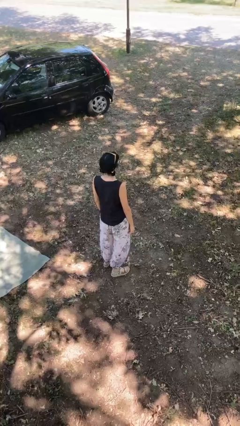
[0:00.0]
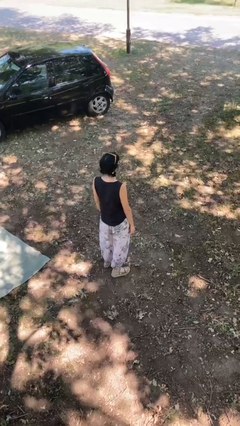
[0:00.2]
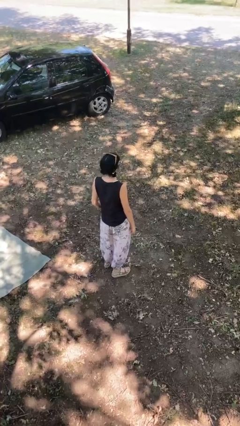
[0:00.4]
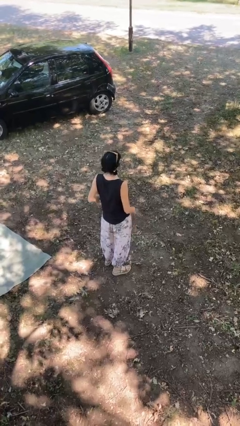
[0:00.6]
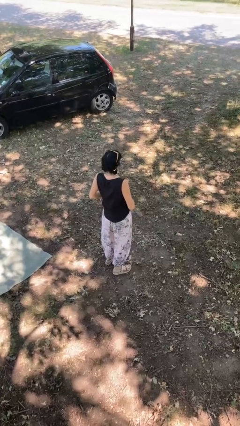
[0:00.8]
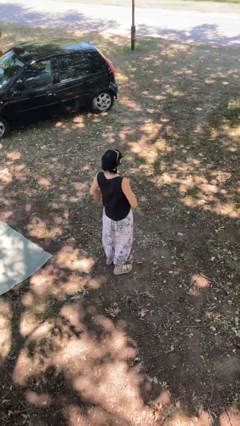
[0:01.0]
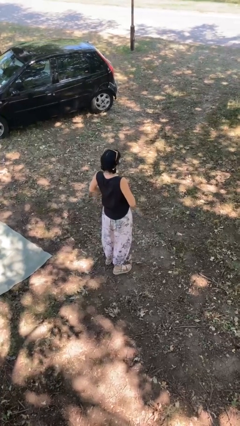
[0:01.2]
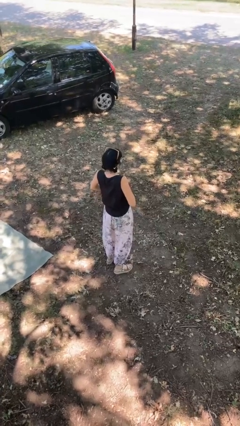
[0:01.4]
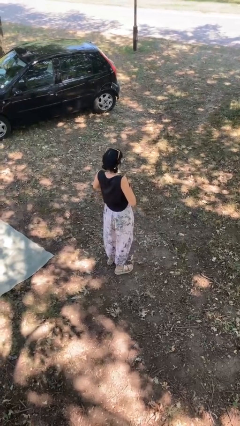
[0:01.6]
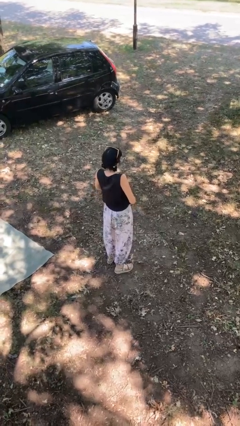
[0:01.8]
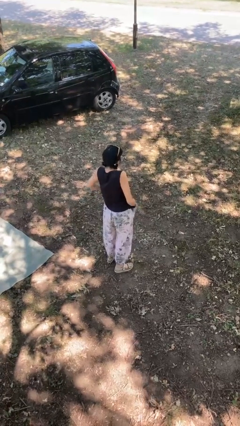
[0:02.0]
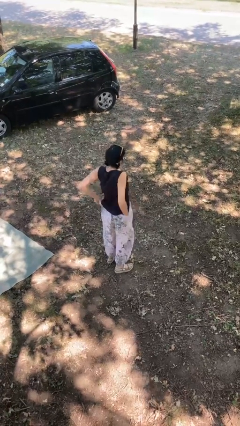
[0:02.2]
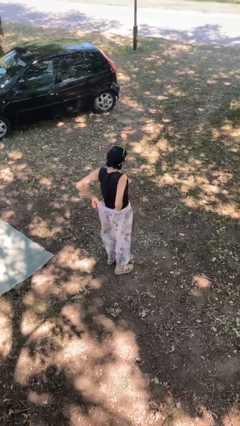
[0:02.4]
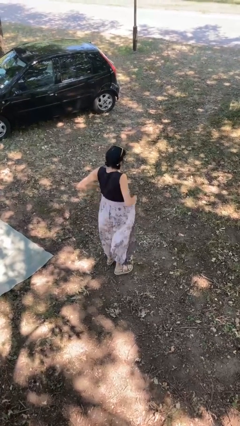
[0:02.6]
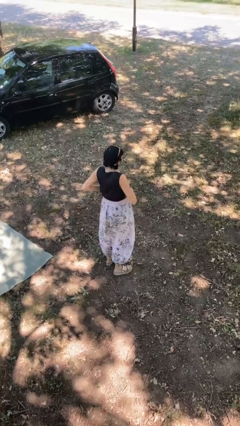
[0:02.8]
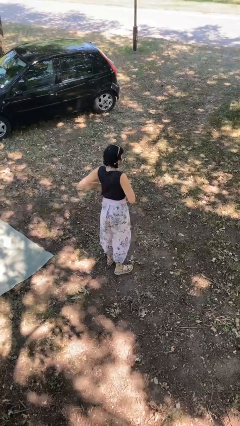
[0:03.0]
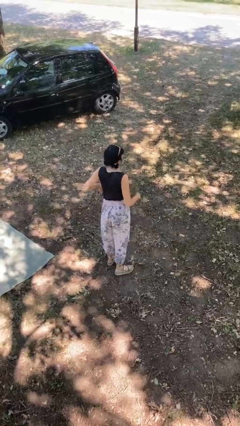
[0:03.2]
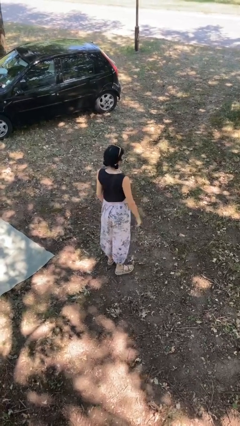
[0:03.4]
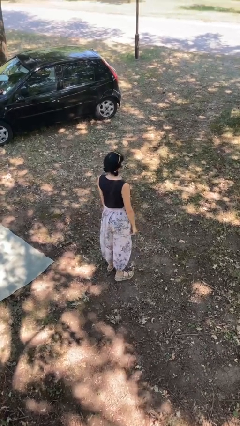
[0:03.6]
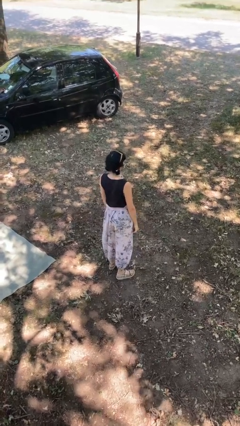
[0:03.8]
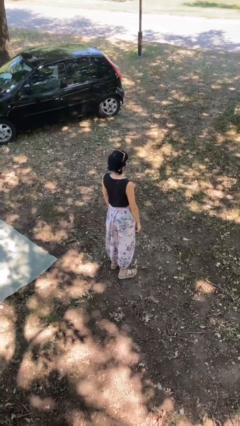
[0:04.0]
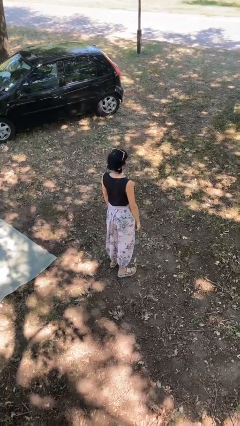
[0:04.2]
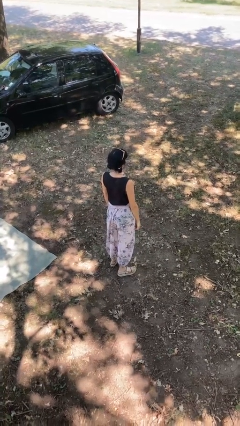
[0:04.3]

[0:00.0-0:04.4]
person tucks in shirt

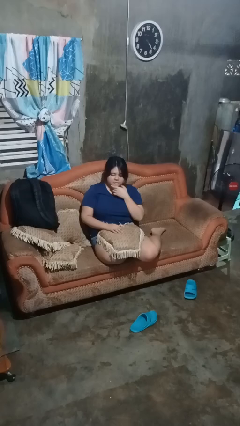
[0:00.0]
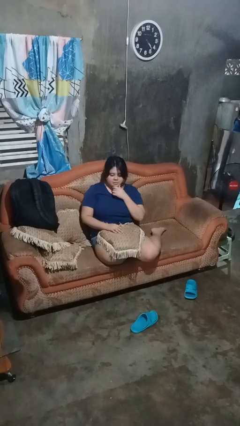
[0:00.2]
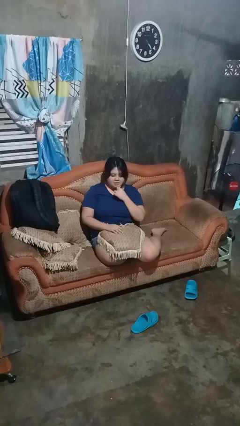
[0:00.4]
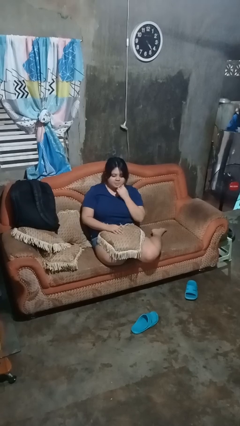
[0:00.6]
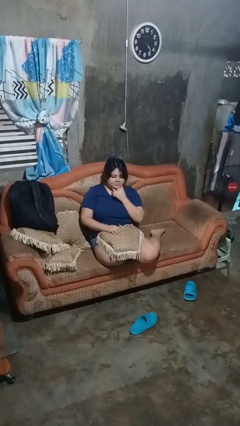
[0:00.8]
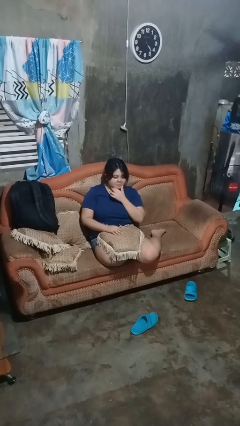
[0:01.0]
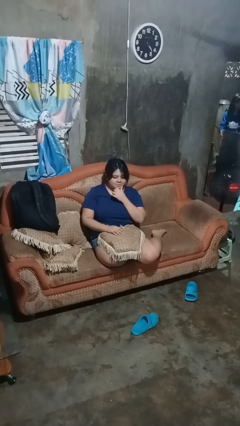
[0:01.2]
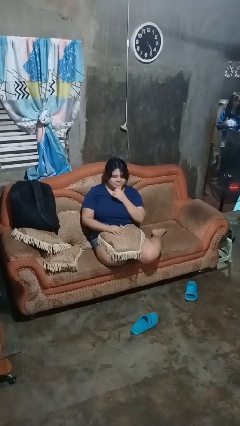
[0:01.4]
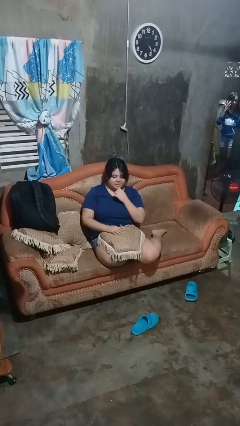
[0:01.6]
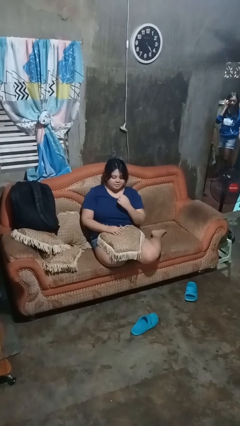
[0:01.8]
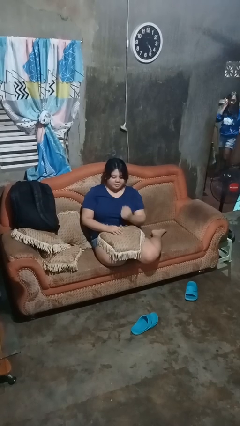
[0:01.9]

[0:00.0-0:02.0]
person strokes chin

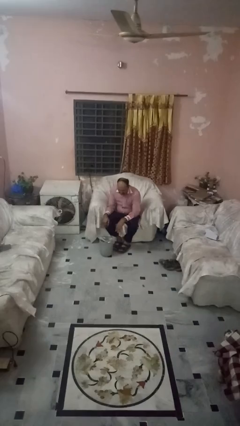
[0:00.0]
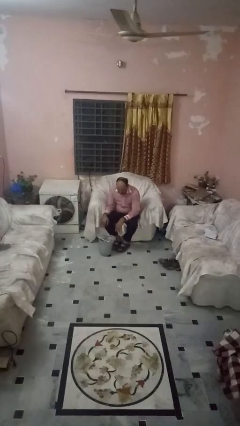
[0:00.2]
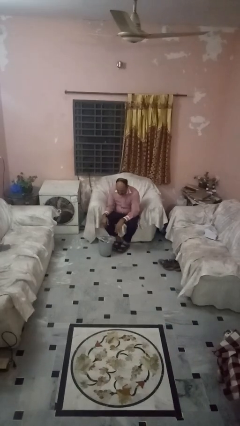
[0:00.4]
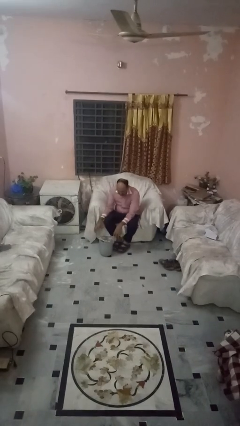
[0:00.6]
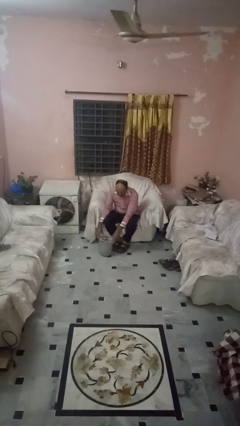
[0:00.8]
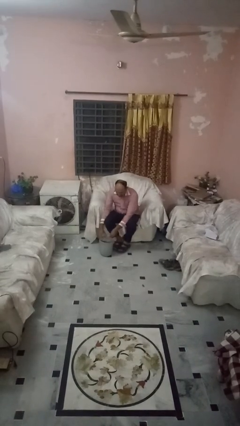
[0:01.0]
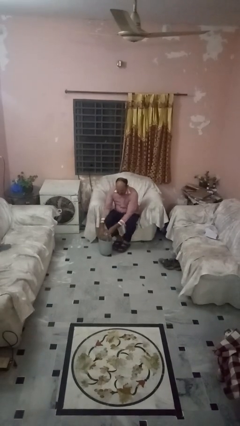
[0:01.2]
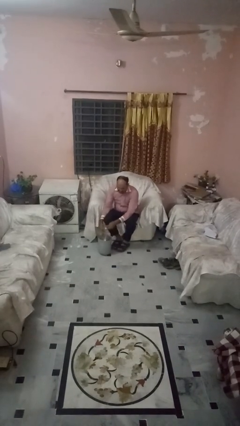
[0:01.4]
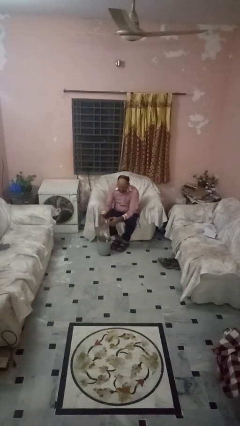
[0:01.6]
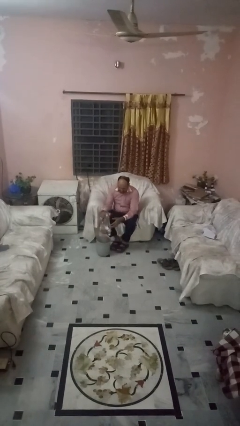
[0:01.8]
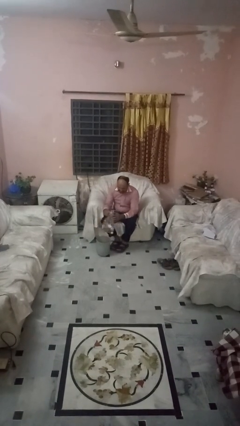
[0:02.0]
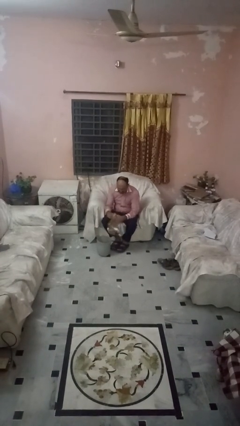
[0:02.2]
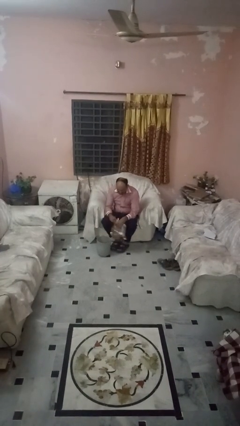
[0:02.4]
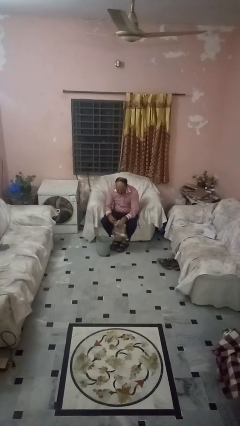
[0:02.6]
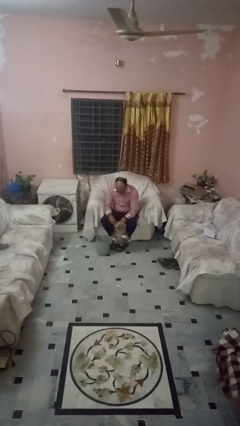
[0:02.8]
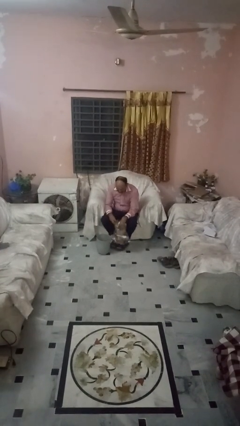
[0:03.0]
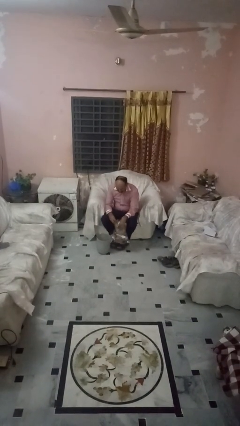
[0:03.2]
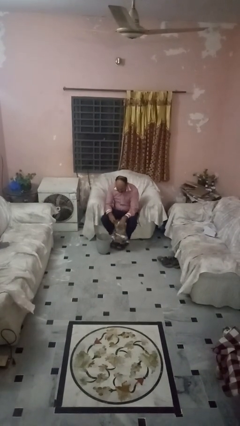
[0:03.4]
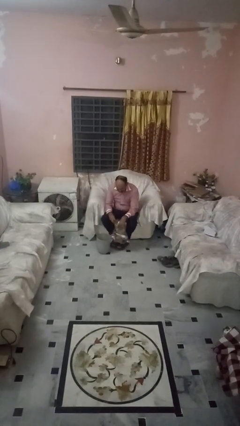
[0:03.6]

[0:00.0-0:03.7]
person removes trashbag from trashcan

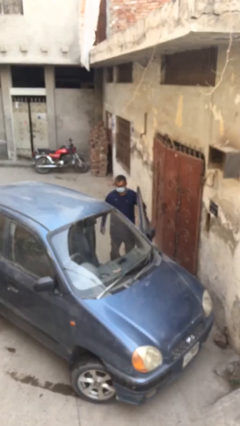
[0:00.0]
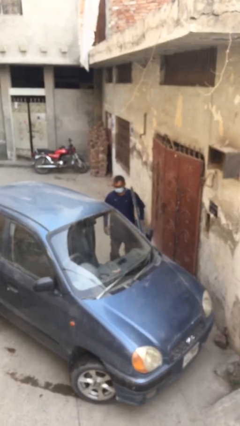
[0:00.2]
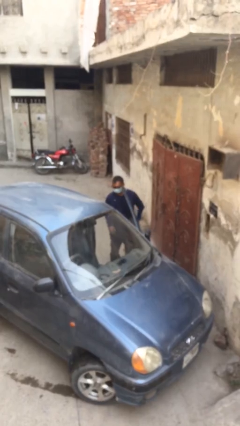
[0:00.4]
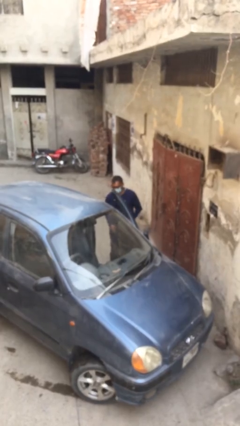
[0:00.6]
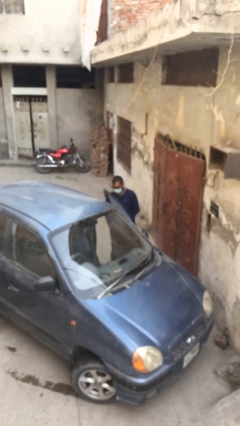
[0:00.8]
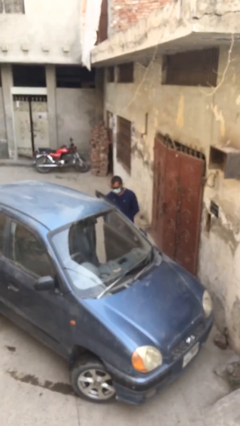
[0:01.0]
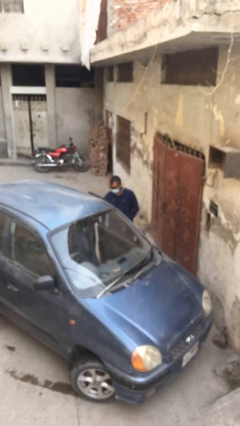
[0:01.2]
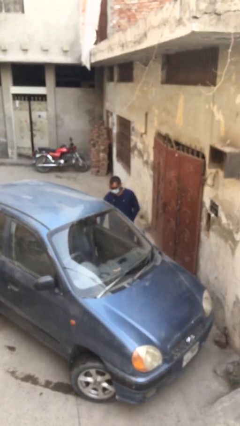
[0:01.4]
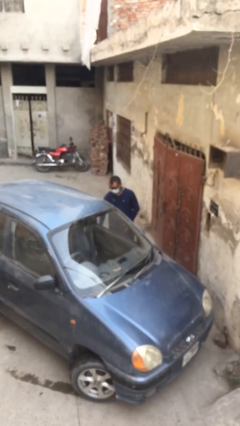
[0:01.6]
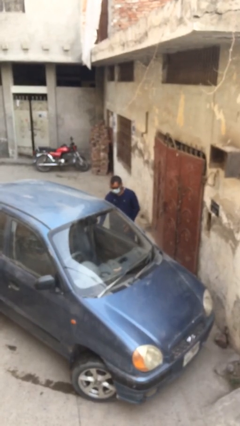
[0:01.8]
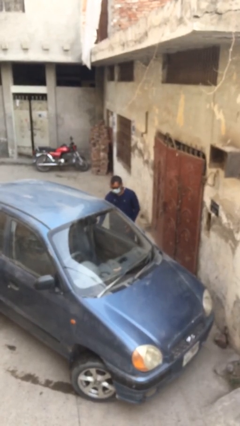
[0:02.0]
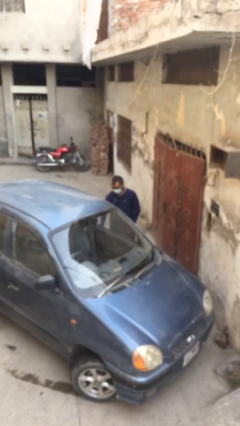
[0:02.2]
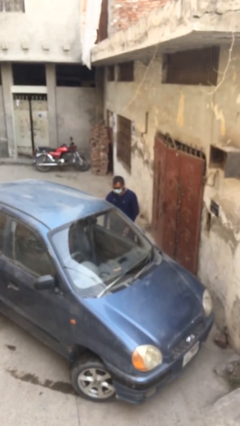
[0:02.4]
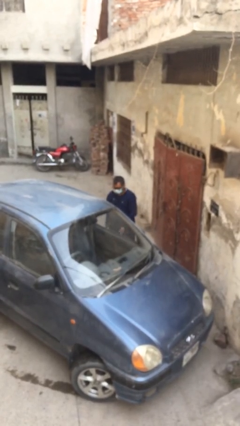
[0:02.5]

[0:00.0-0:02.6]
person closes car door

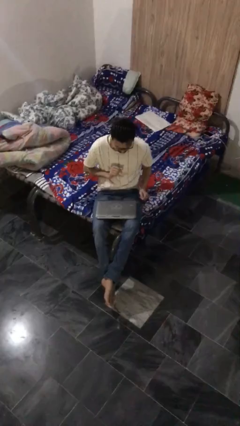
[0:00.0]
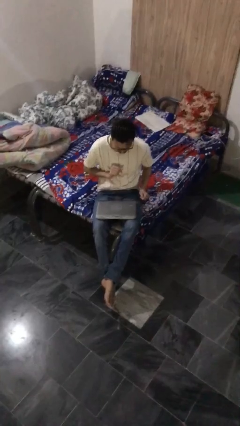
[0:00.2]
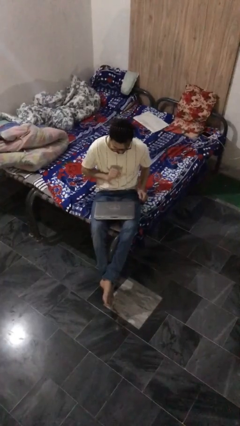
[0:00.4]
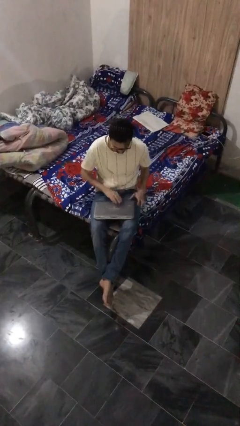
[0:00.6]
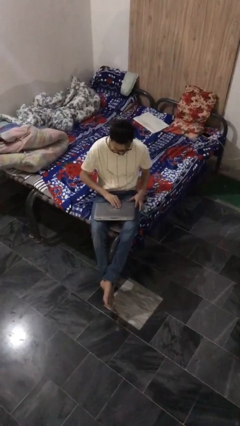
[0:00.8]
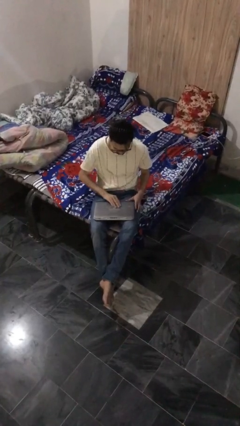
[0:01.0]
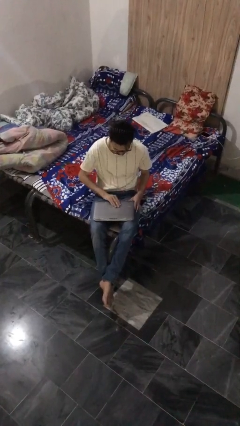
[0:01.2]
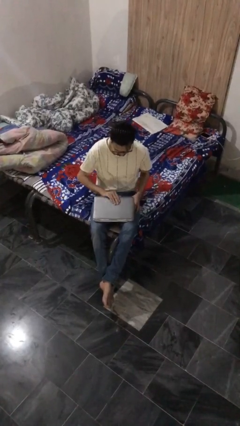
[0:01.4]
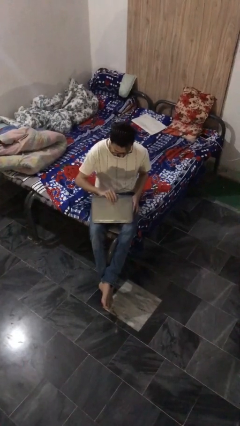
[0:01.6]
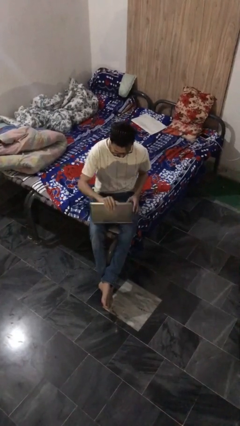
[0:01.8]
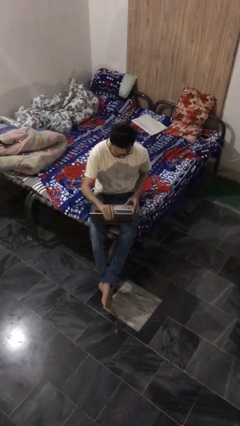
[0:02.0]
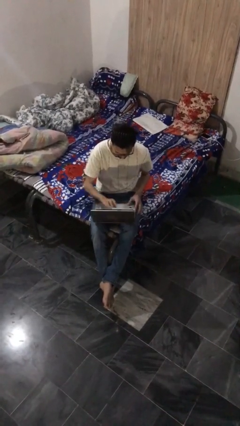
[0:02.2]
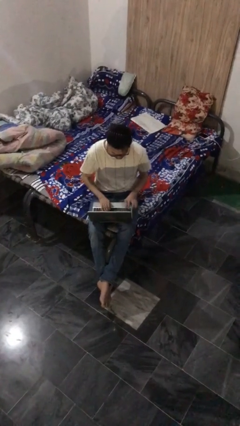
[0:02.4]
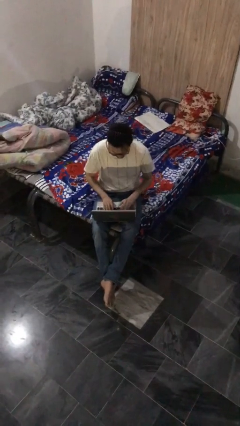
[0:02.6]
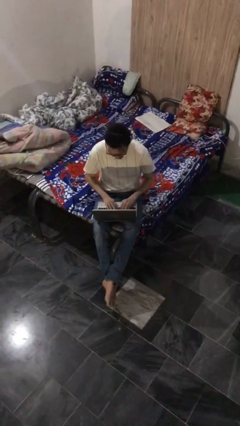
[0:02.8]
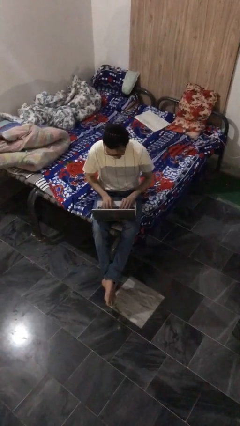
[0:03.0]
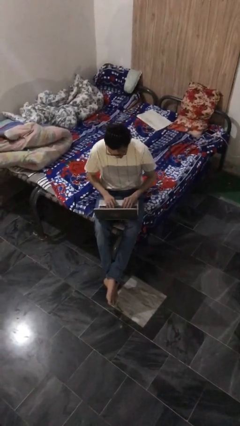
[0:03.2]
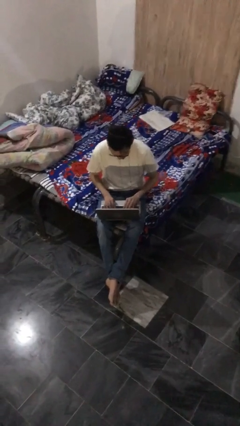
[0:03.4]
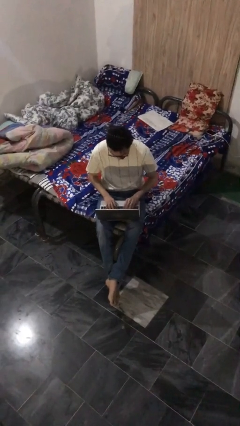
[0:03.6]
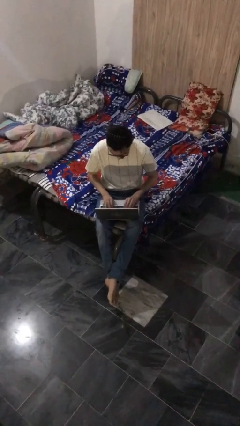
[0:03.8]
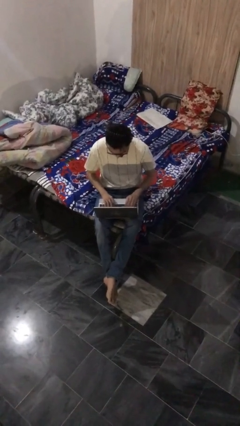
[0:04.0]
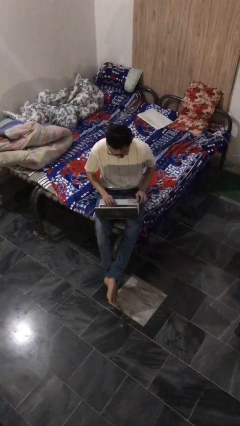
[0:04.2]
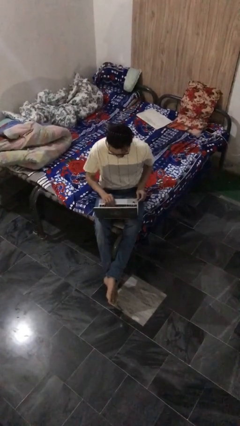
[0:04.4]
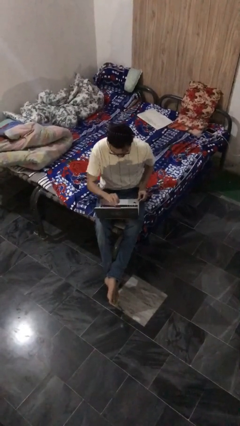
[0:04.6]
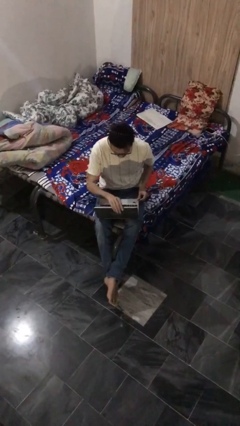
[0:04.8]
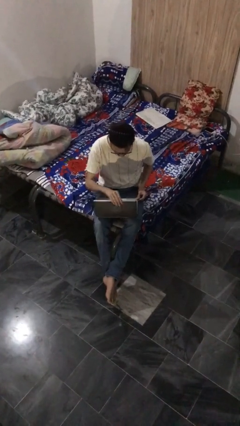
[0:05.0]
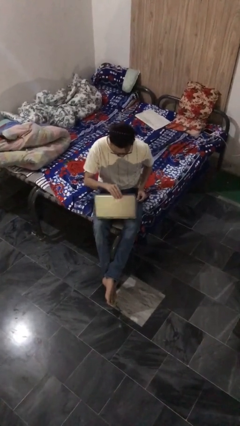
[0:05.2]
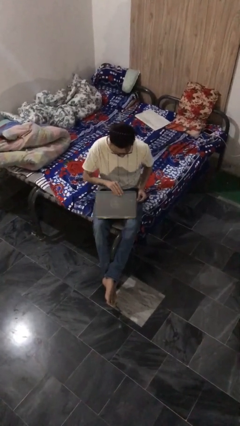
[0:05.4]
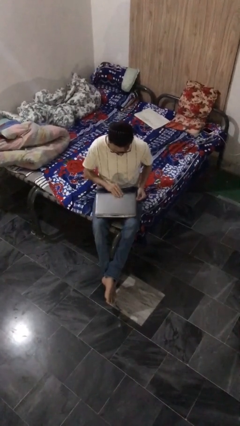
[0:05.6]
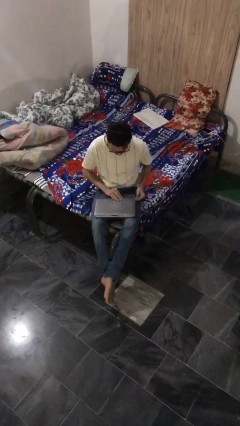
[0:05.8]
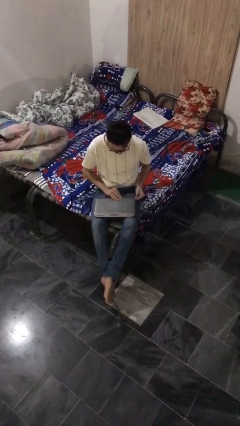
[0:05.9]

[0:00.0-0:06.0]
person interacts with laptop
